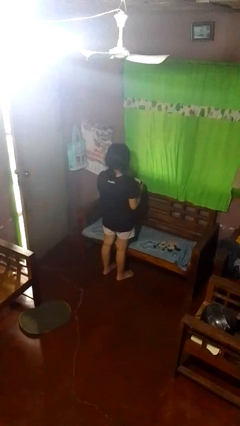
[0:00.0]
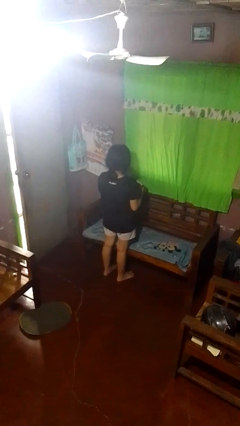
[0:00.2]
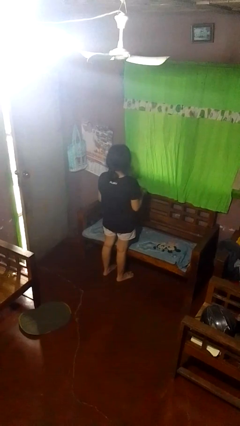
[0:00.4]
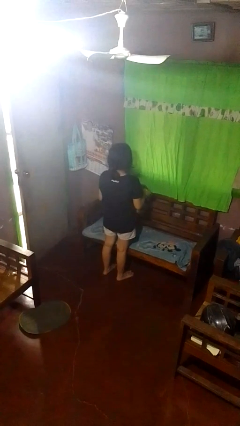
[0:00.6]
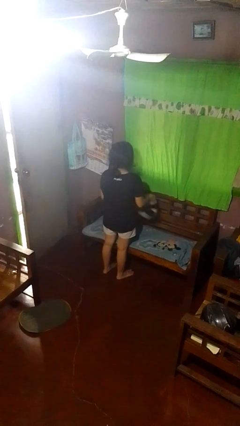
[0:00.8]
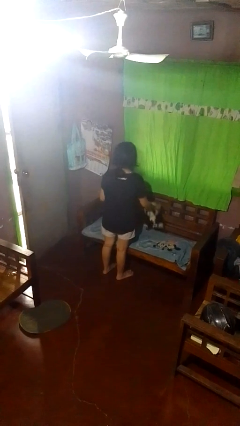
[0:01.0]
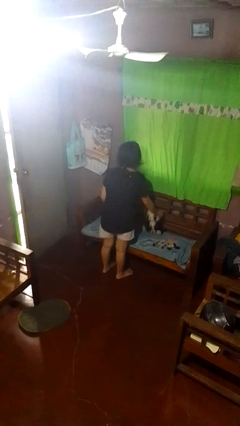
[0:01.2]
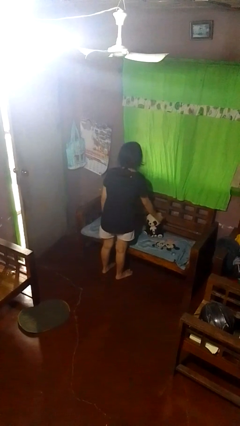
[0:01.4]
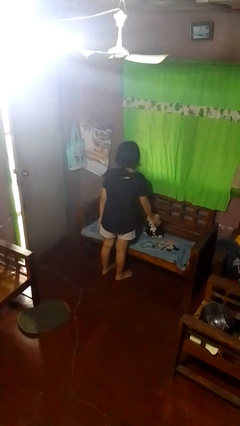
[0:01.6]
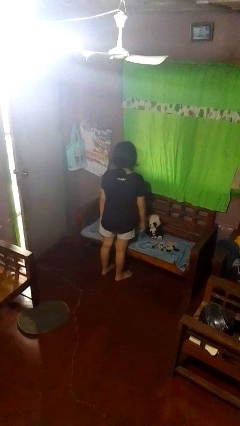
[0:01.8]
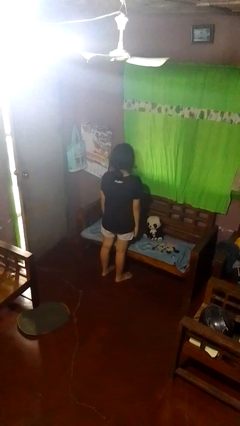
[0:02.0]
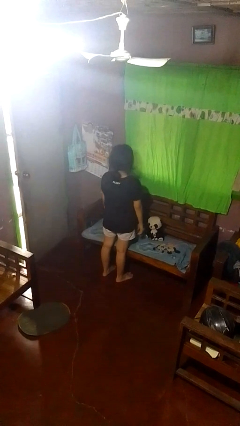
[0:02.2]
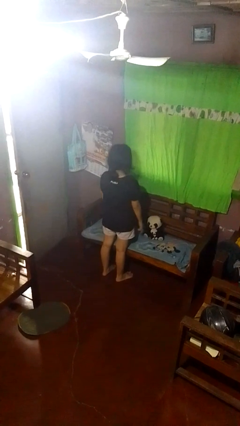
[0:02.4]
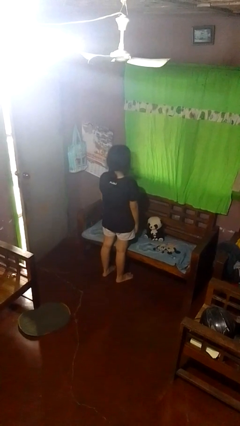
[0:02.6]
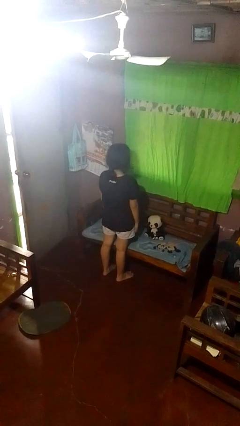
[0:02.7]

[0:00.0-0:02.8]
person puts down object on couch

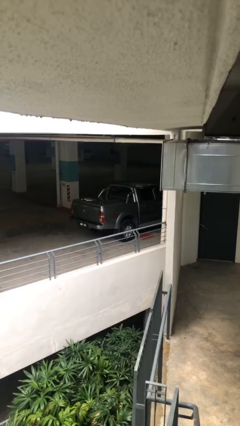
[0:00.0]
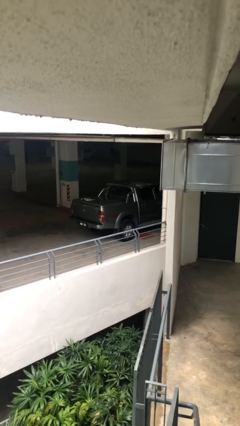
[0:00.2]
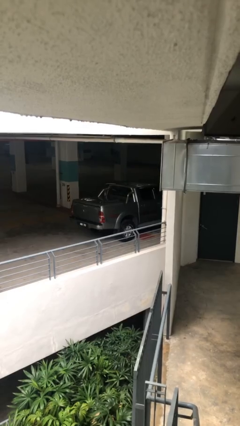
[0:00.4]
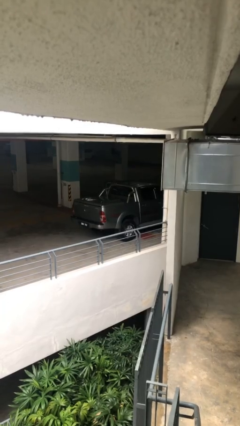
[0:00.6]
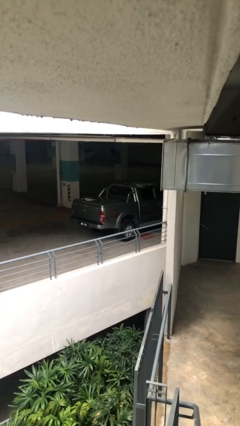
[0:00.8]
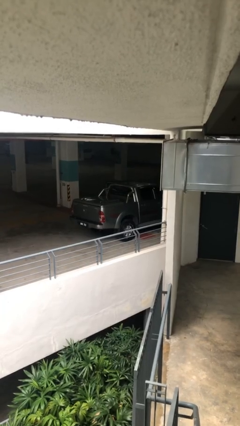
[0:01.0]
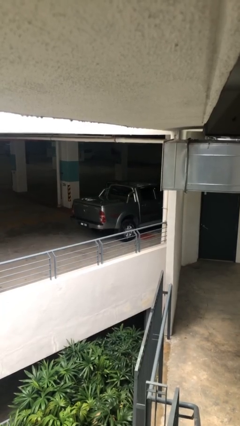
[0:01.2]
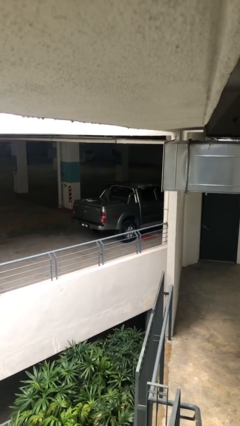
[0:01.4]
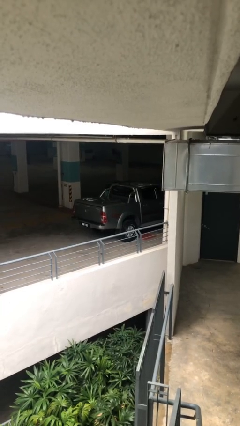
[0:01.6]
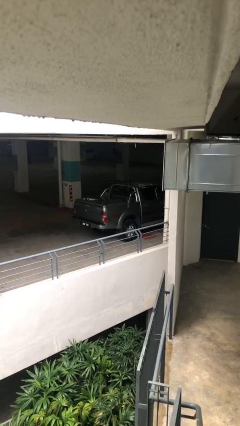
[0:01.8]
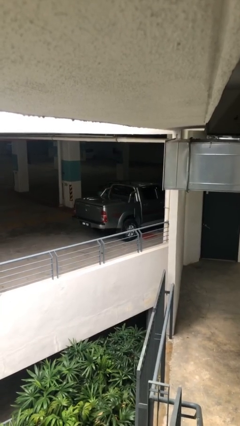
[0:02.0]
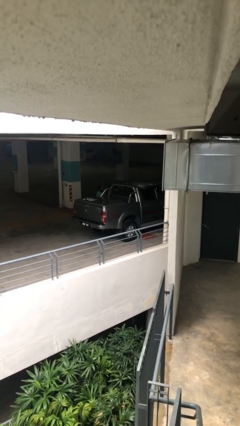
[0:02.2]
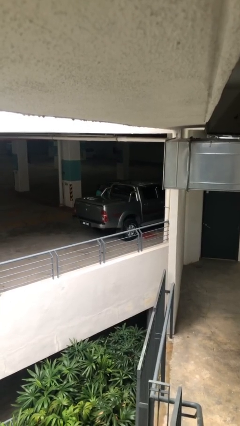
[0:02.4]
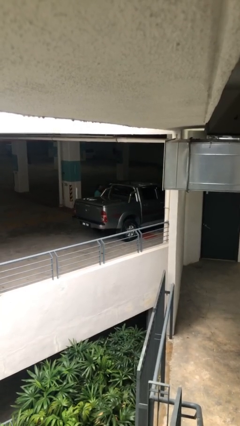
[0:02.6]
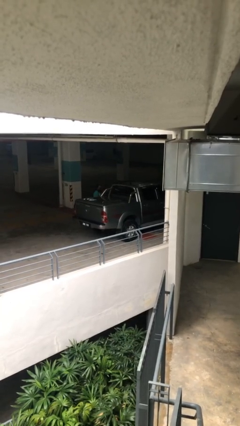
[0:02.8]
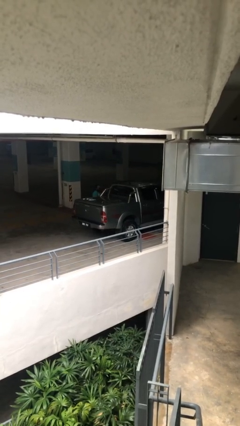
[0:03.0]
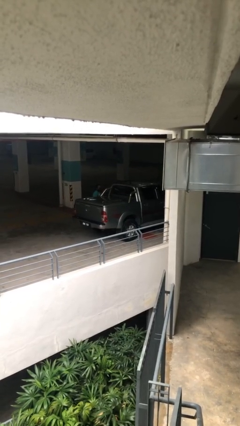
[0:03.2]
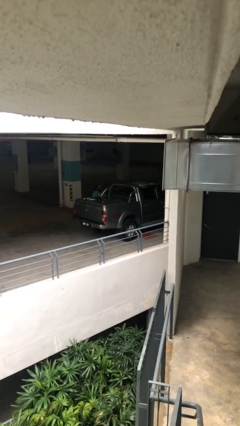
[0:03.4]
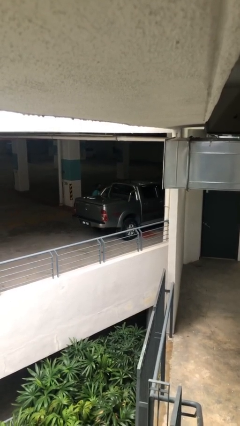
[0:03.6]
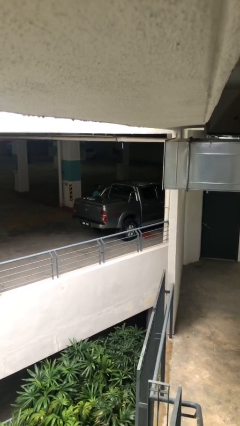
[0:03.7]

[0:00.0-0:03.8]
car drops off person

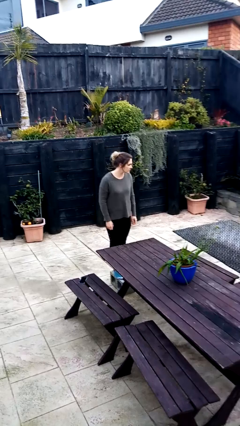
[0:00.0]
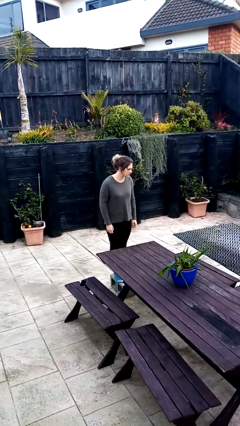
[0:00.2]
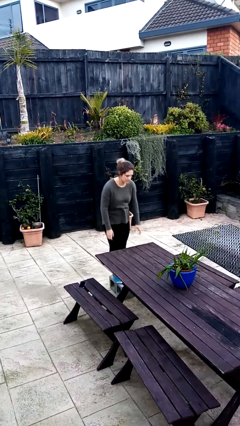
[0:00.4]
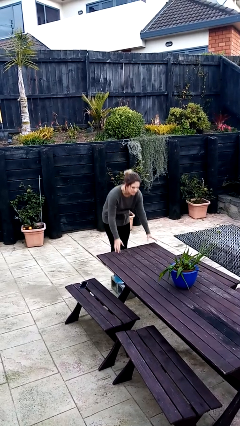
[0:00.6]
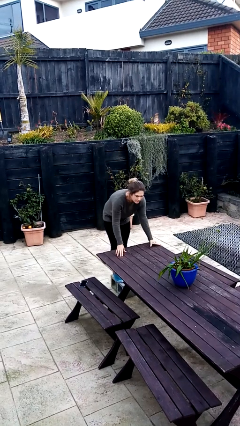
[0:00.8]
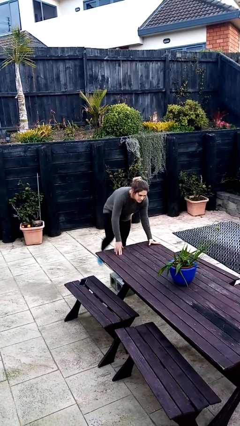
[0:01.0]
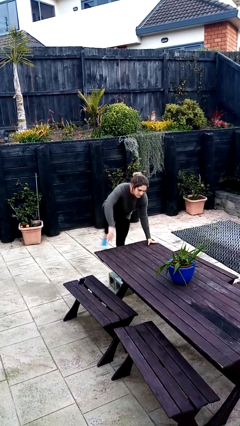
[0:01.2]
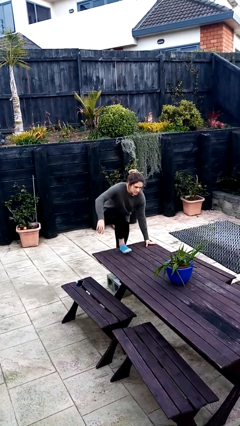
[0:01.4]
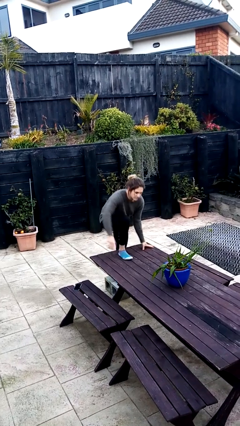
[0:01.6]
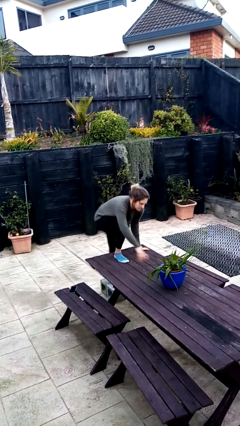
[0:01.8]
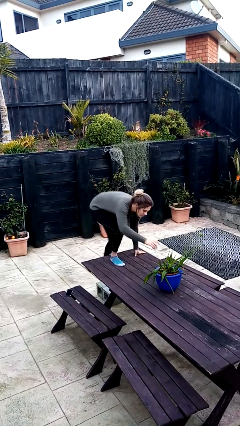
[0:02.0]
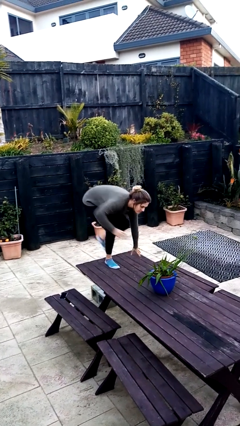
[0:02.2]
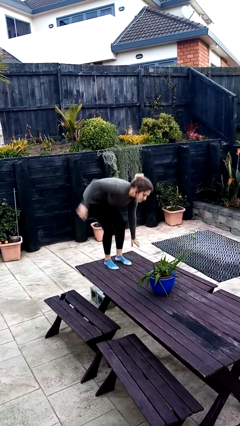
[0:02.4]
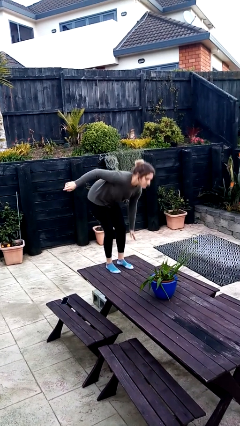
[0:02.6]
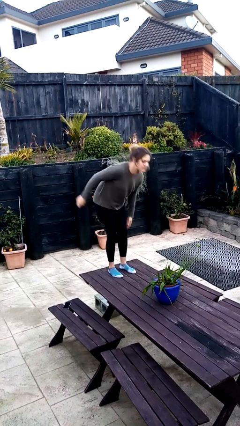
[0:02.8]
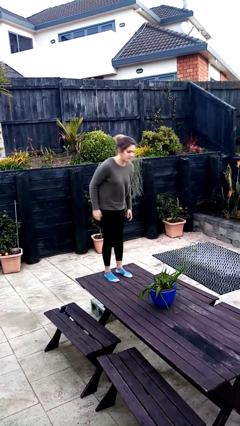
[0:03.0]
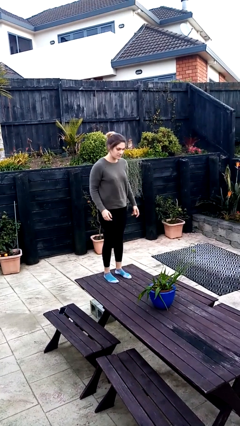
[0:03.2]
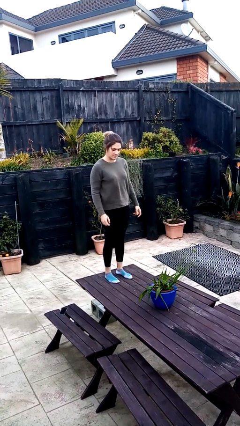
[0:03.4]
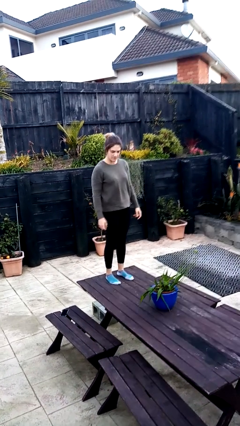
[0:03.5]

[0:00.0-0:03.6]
person climbs on table

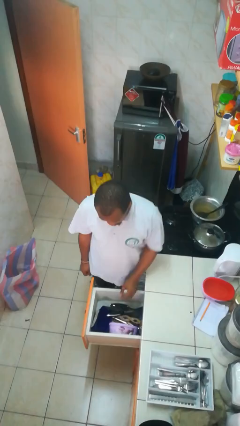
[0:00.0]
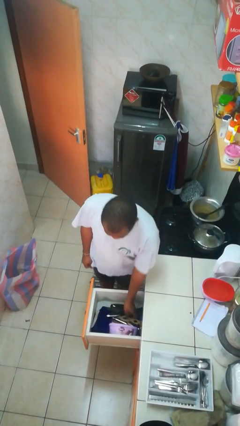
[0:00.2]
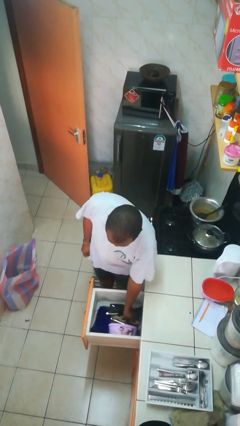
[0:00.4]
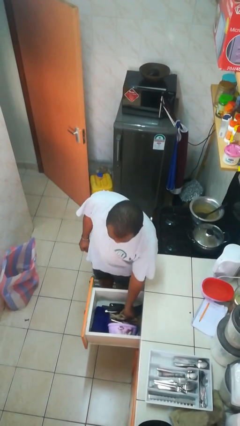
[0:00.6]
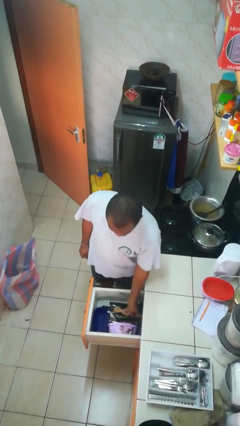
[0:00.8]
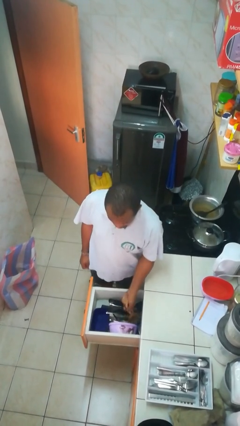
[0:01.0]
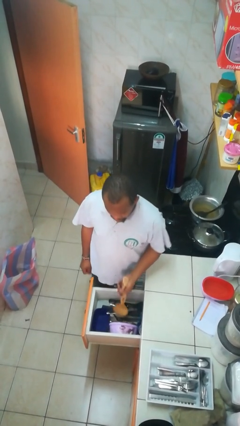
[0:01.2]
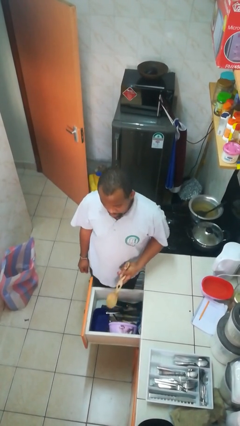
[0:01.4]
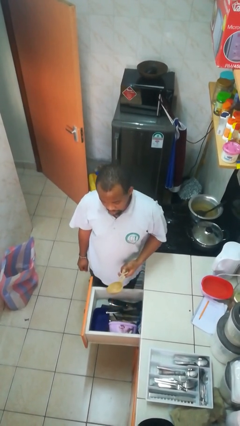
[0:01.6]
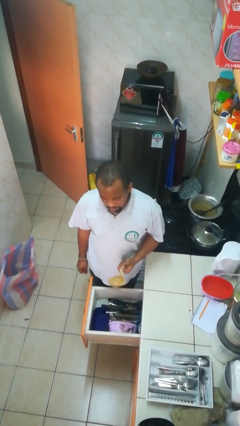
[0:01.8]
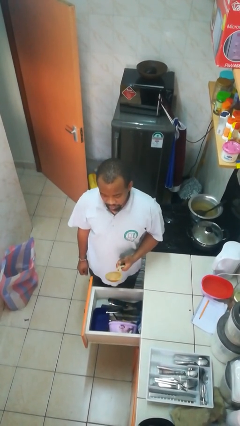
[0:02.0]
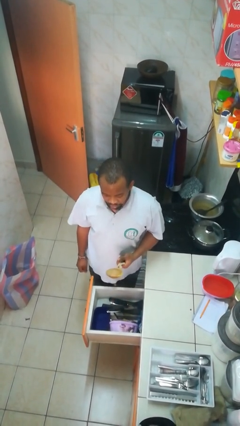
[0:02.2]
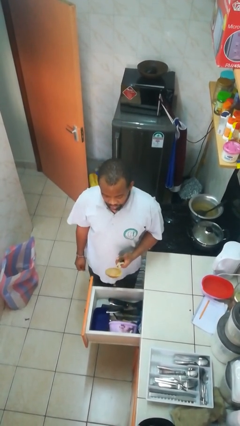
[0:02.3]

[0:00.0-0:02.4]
person takes object from kitchen drawer

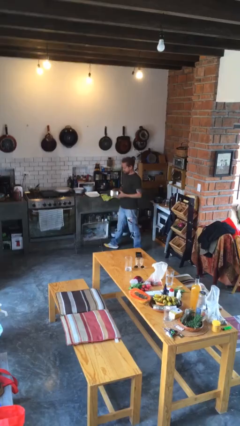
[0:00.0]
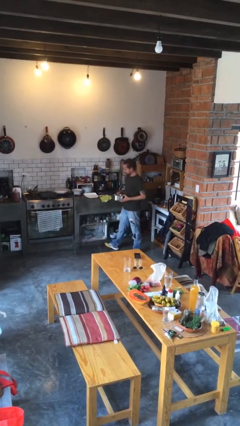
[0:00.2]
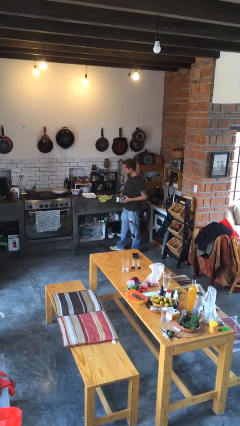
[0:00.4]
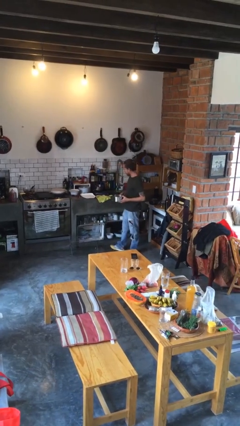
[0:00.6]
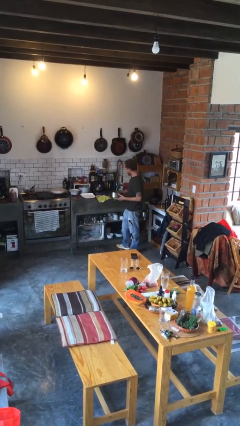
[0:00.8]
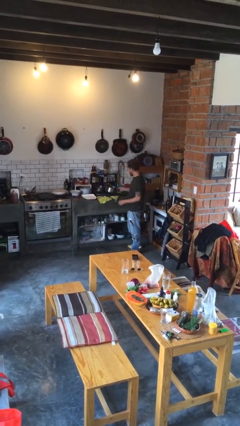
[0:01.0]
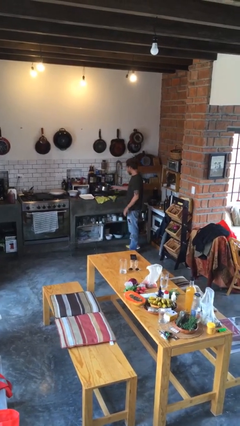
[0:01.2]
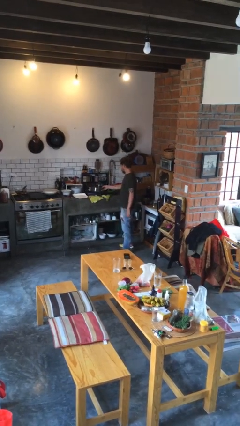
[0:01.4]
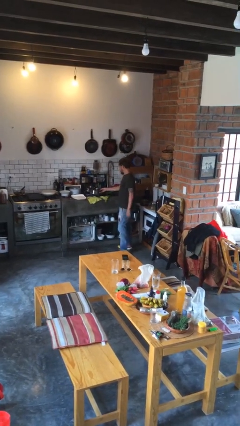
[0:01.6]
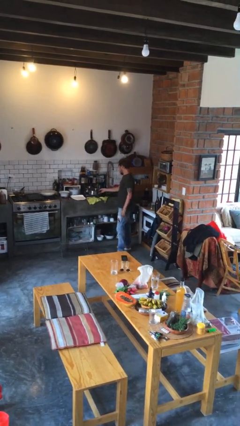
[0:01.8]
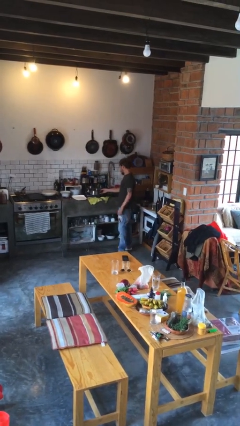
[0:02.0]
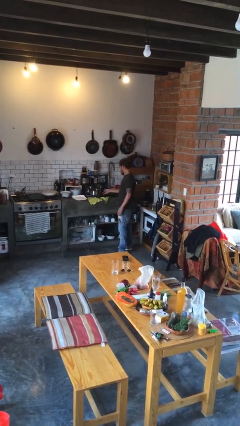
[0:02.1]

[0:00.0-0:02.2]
person puts down object on countertop

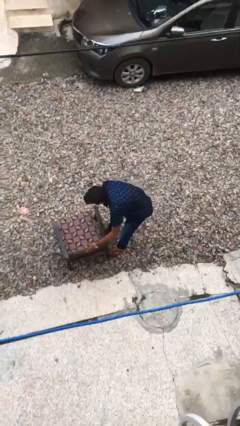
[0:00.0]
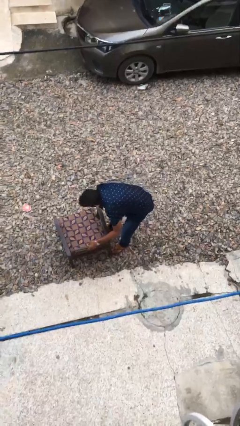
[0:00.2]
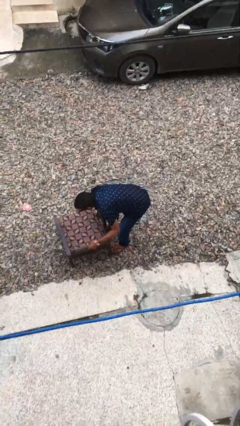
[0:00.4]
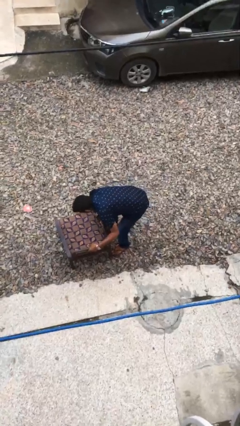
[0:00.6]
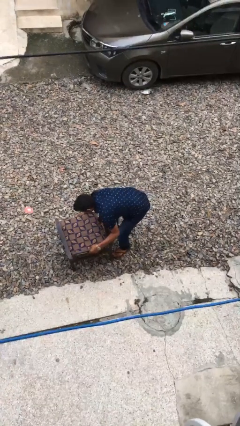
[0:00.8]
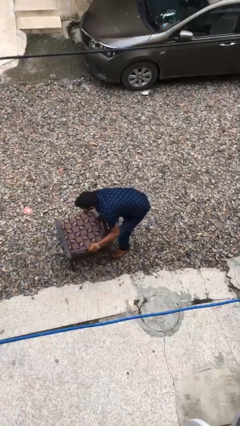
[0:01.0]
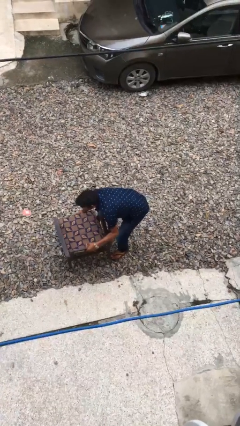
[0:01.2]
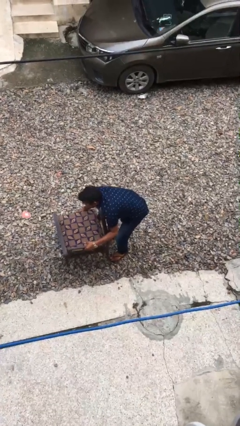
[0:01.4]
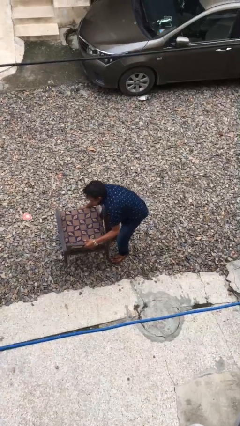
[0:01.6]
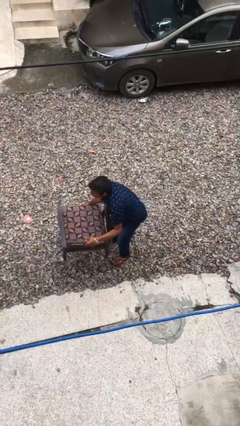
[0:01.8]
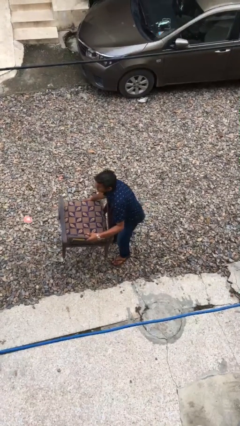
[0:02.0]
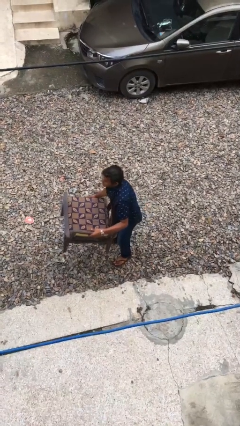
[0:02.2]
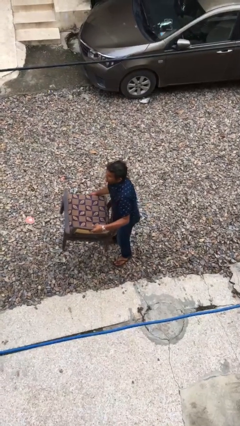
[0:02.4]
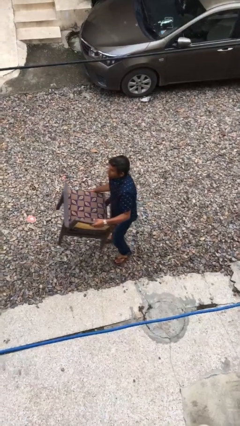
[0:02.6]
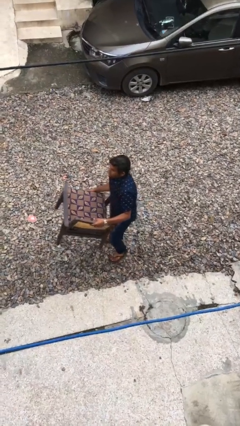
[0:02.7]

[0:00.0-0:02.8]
person picks up object from floor
